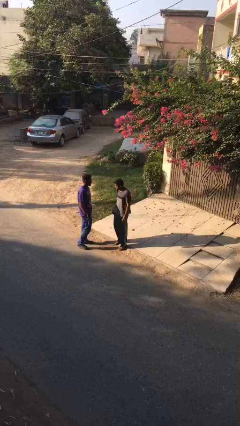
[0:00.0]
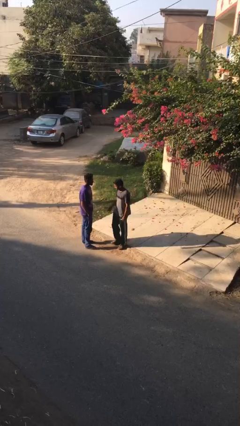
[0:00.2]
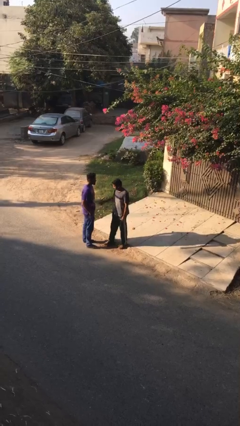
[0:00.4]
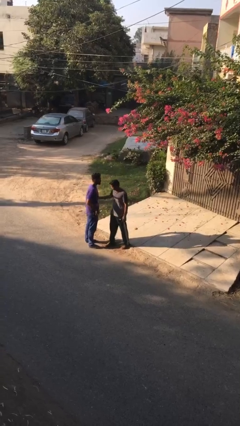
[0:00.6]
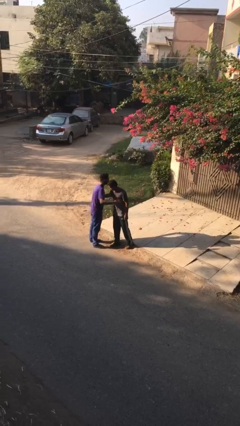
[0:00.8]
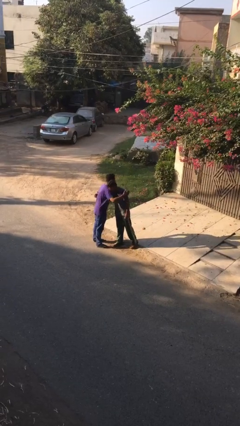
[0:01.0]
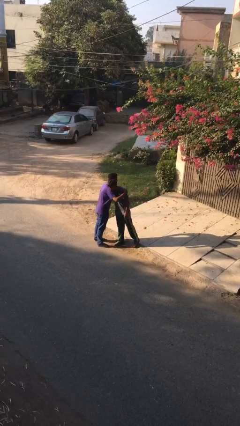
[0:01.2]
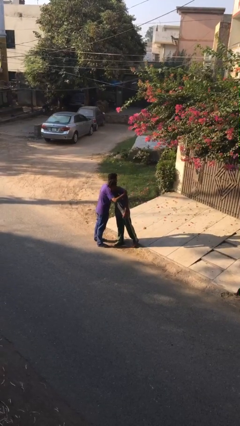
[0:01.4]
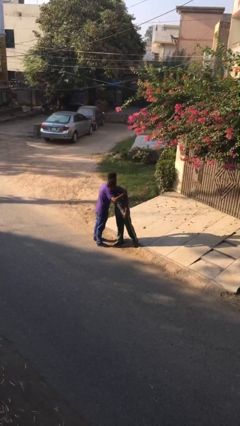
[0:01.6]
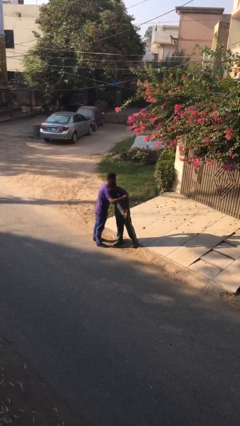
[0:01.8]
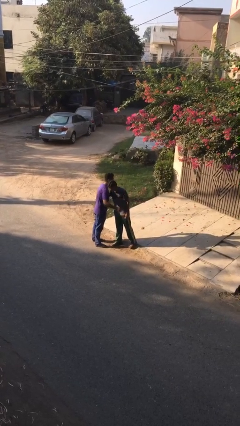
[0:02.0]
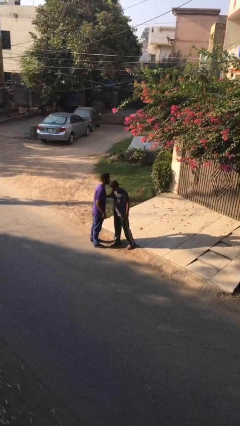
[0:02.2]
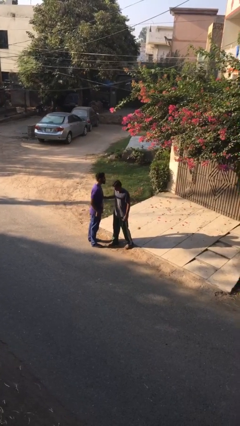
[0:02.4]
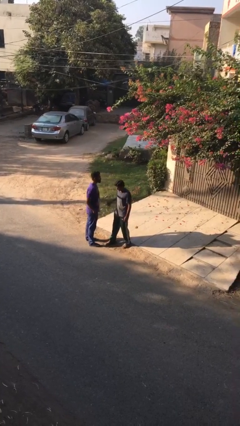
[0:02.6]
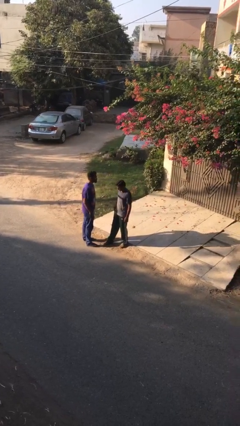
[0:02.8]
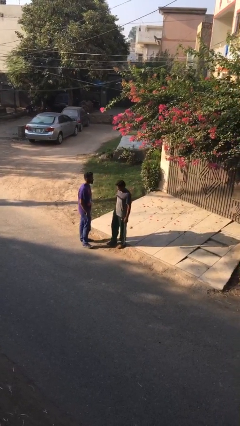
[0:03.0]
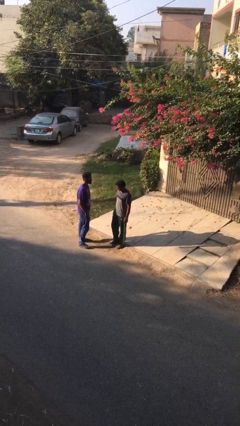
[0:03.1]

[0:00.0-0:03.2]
person embraces person

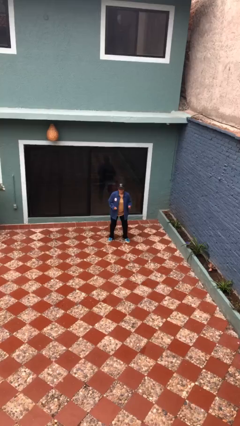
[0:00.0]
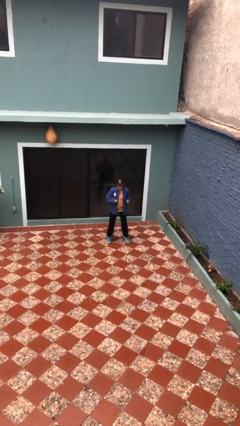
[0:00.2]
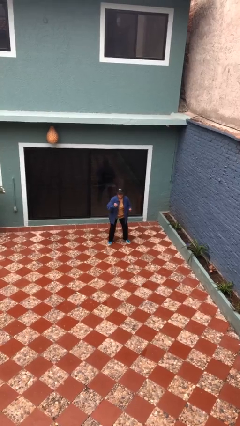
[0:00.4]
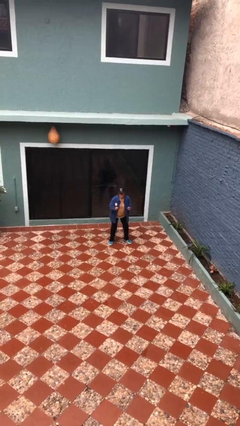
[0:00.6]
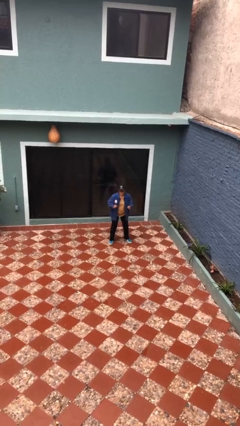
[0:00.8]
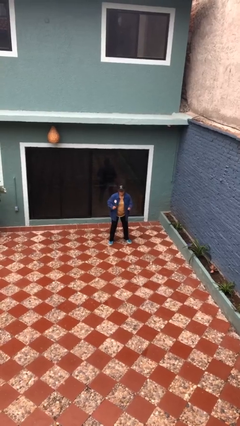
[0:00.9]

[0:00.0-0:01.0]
person jumps

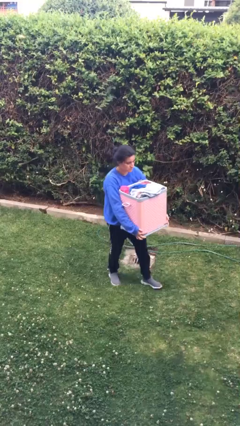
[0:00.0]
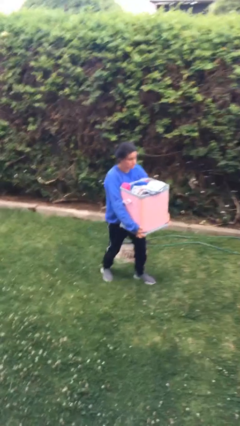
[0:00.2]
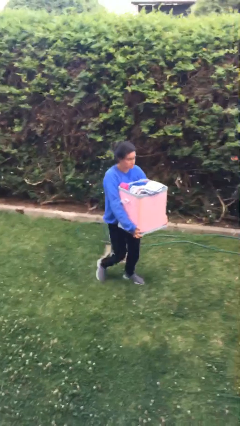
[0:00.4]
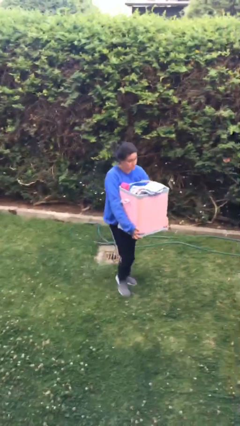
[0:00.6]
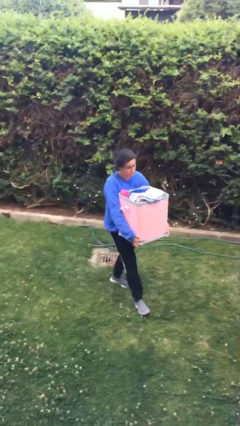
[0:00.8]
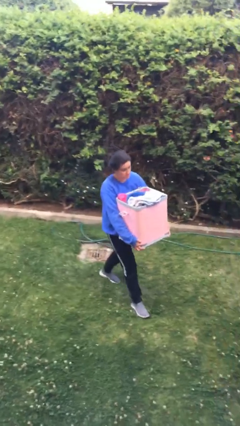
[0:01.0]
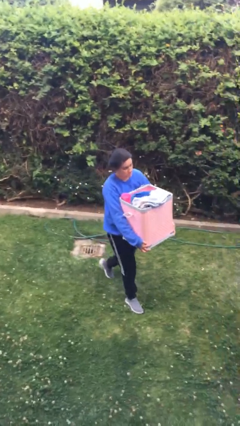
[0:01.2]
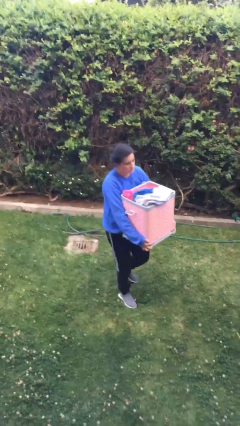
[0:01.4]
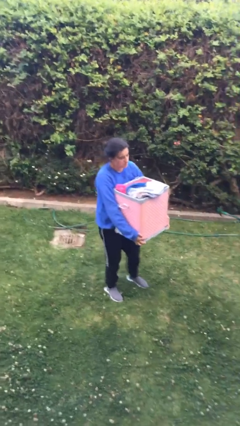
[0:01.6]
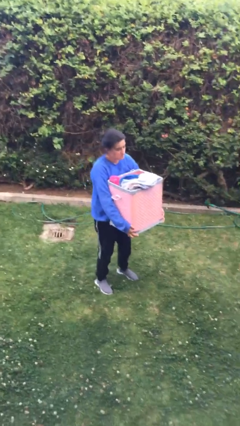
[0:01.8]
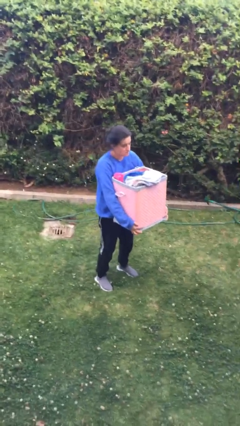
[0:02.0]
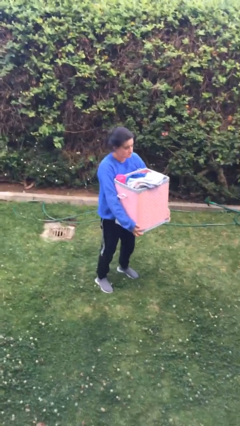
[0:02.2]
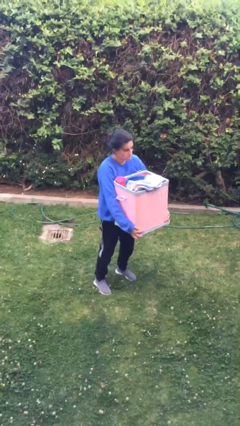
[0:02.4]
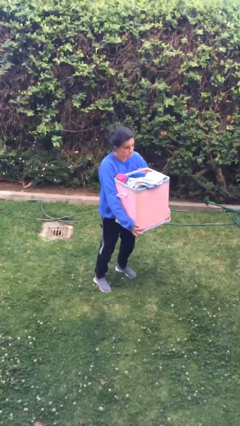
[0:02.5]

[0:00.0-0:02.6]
person carries groceries

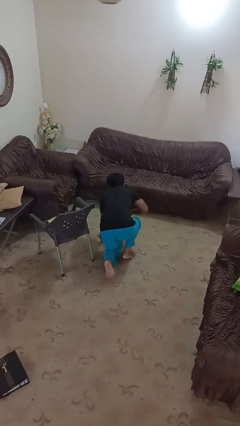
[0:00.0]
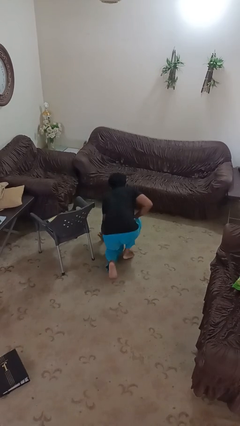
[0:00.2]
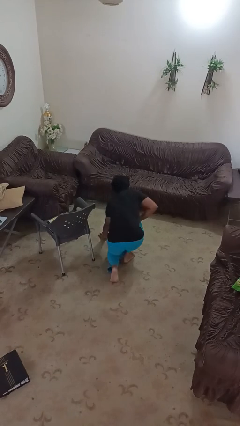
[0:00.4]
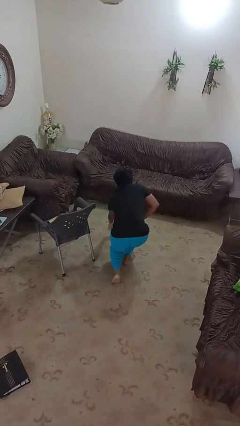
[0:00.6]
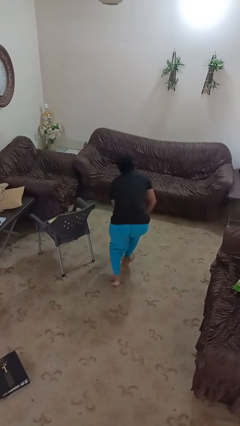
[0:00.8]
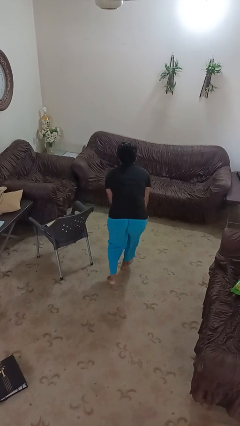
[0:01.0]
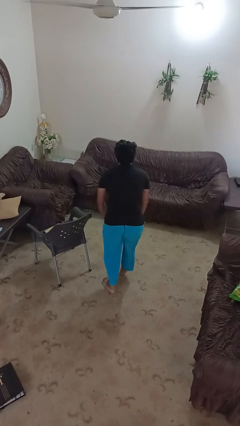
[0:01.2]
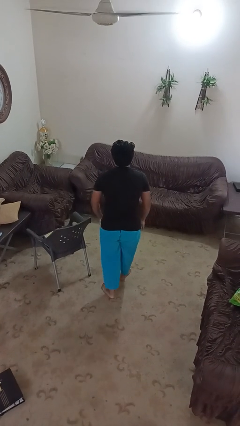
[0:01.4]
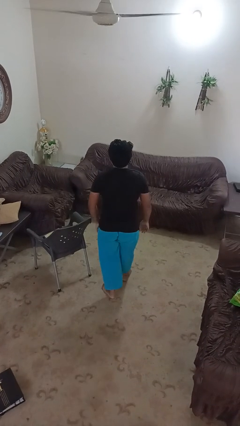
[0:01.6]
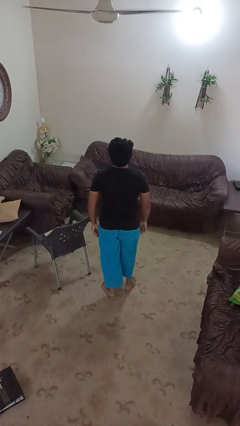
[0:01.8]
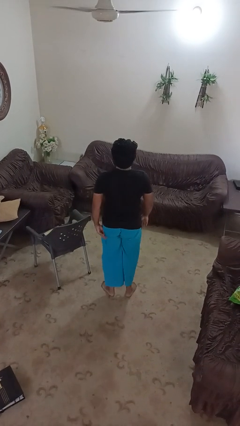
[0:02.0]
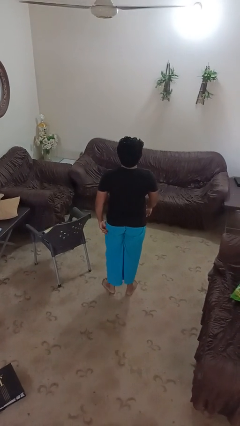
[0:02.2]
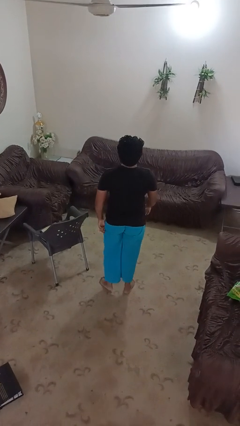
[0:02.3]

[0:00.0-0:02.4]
person stands up from floor

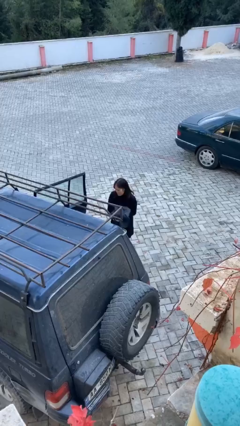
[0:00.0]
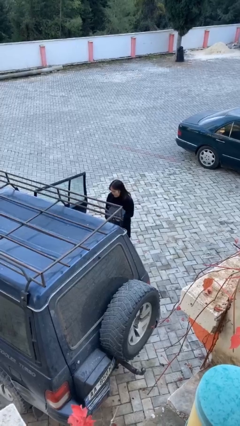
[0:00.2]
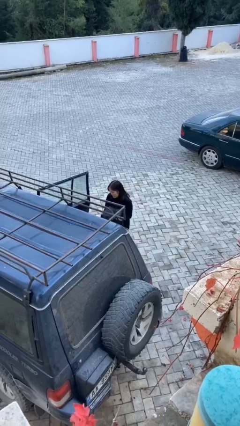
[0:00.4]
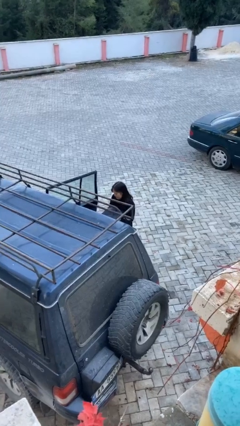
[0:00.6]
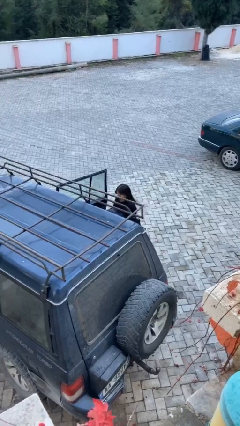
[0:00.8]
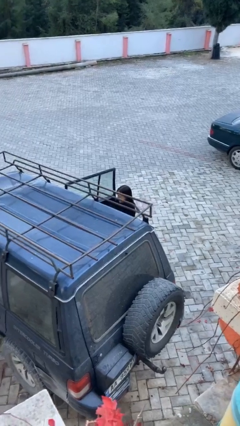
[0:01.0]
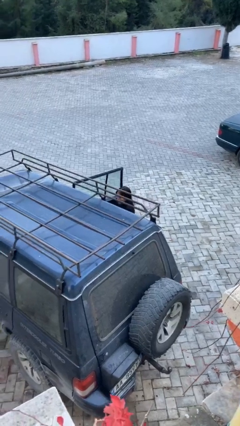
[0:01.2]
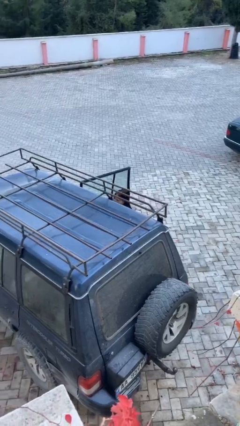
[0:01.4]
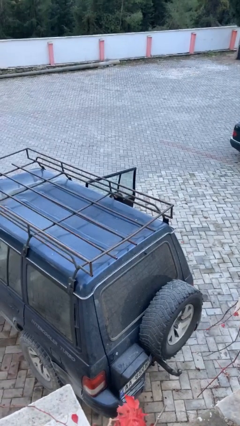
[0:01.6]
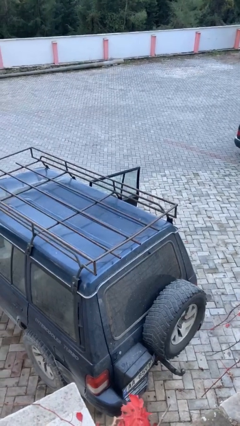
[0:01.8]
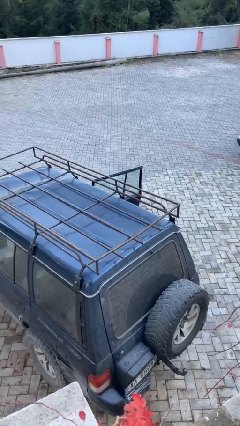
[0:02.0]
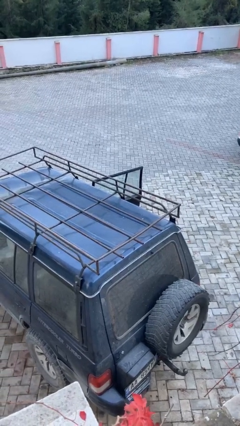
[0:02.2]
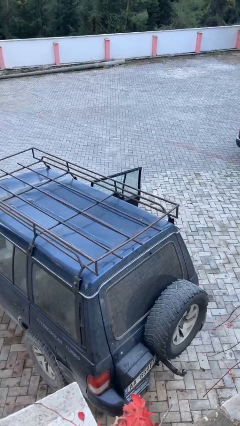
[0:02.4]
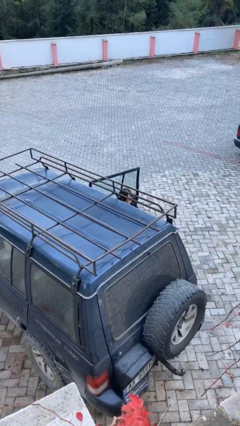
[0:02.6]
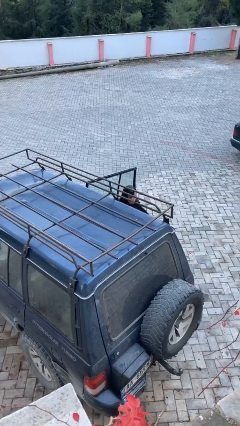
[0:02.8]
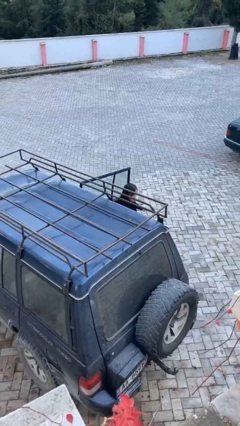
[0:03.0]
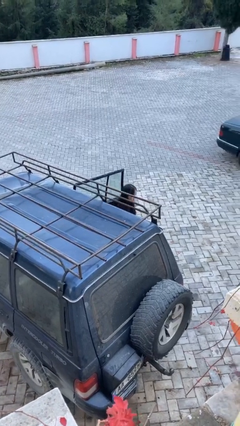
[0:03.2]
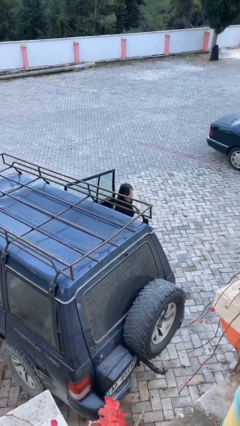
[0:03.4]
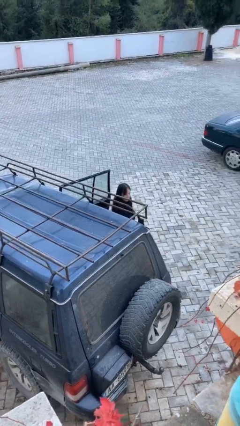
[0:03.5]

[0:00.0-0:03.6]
person loads car

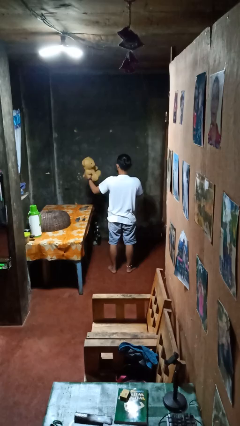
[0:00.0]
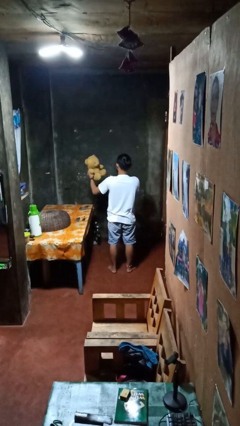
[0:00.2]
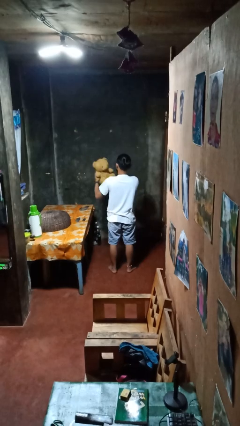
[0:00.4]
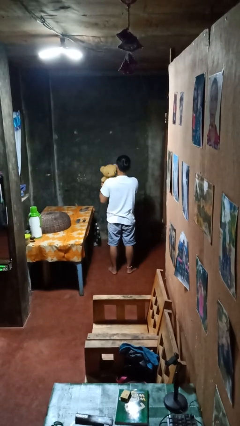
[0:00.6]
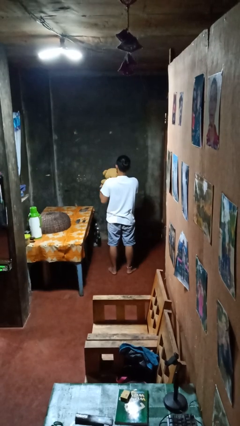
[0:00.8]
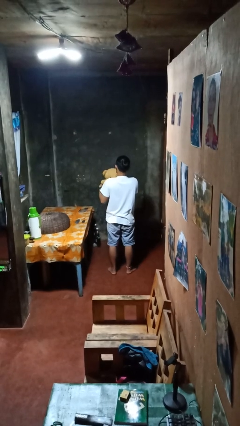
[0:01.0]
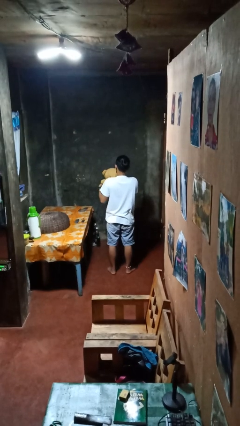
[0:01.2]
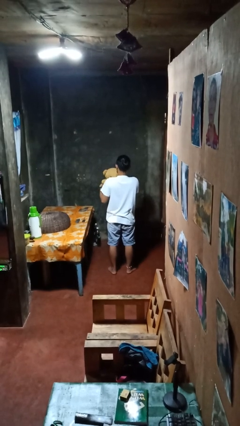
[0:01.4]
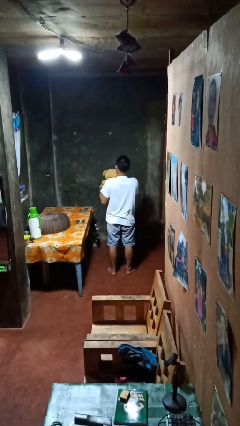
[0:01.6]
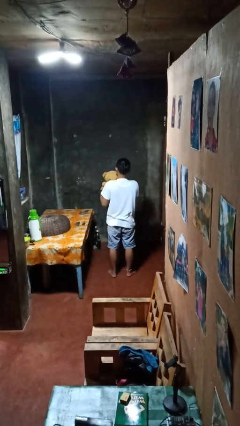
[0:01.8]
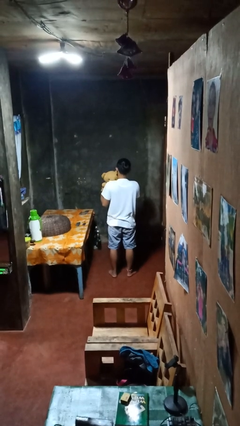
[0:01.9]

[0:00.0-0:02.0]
person hugs stuffed animal

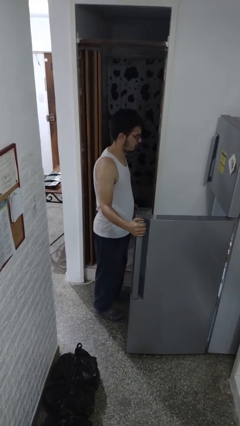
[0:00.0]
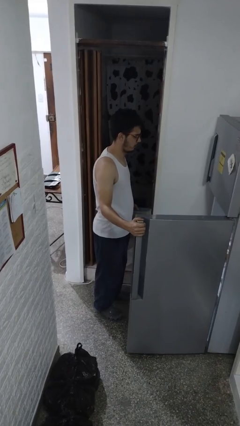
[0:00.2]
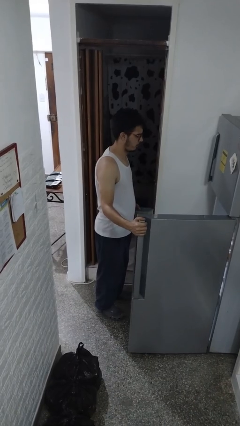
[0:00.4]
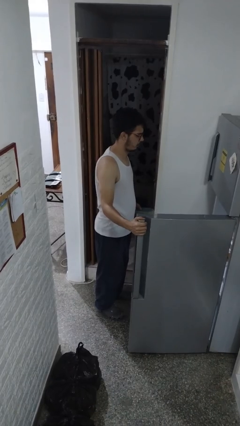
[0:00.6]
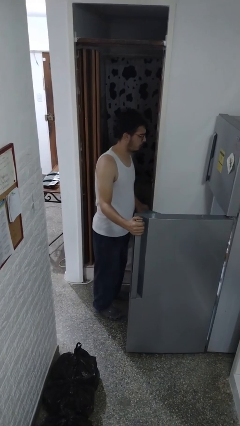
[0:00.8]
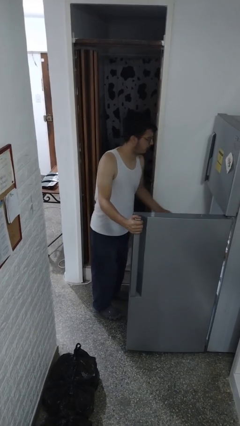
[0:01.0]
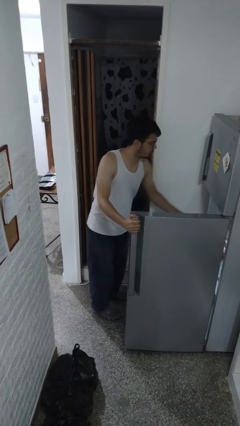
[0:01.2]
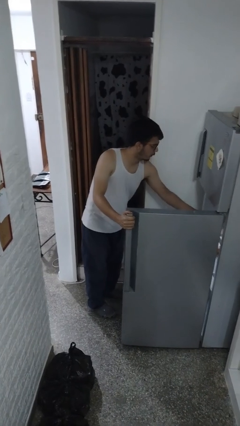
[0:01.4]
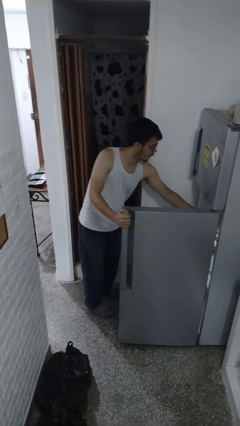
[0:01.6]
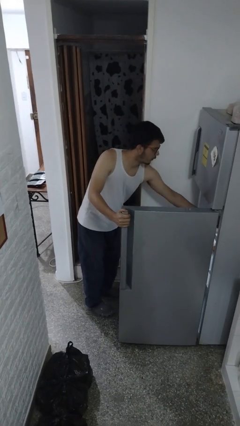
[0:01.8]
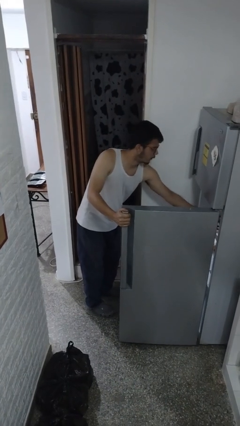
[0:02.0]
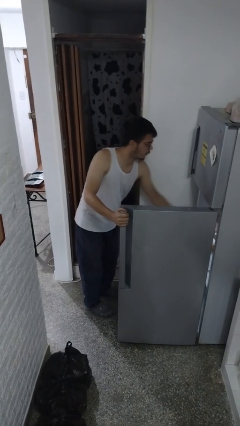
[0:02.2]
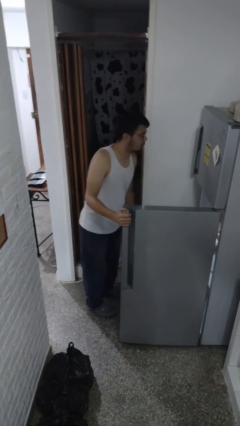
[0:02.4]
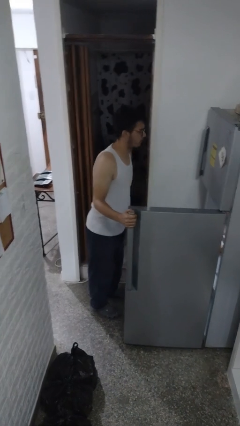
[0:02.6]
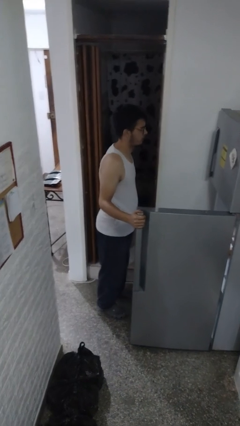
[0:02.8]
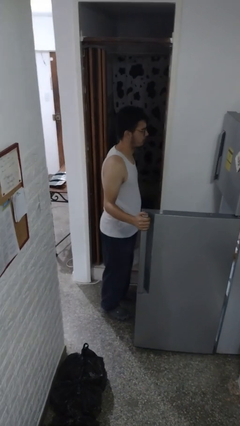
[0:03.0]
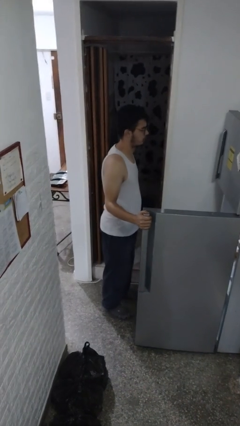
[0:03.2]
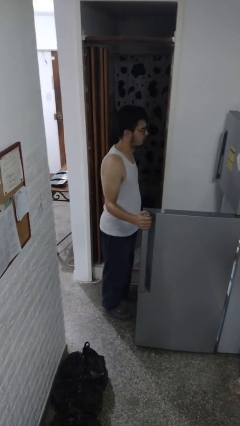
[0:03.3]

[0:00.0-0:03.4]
person puts object into refrigerator
